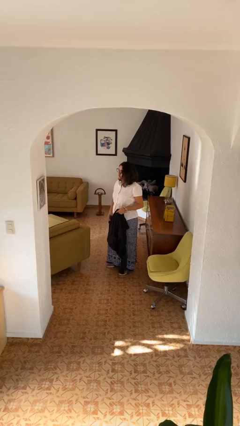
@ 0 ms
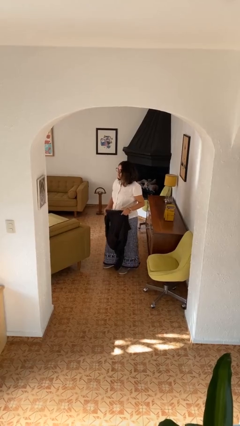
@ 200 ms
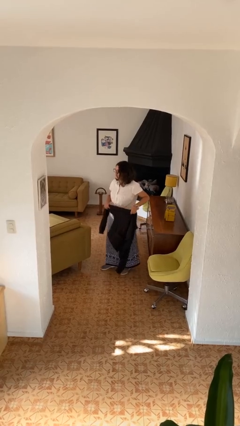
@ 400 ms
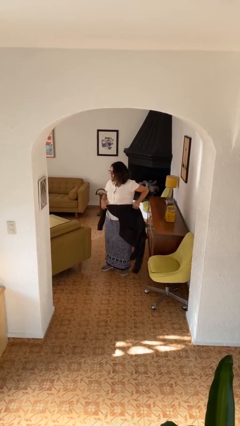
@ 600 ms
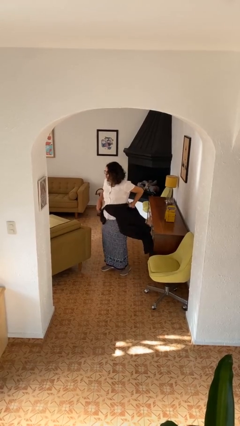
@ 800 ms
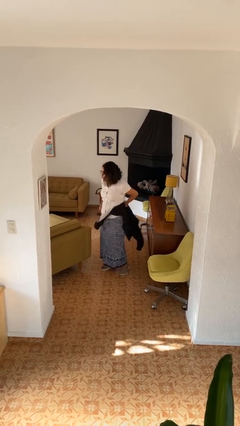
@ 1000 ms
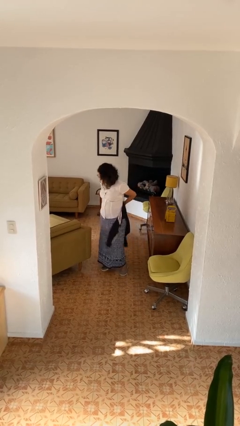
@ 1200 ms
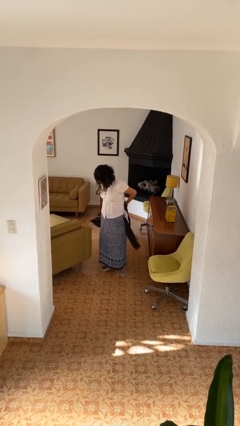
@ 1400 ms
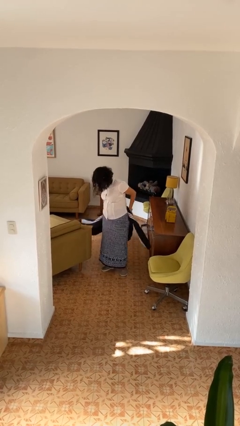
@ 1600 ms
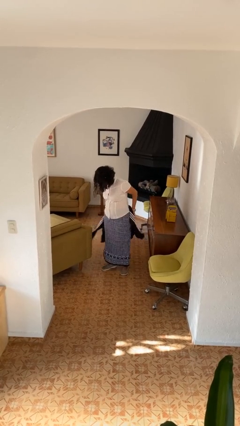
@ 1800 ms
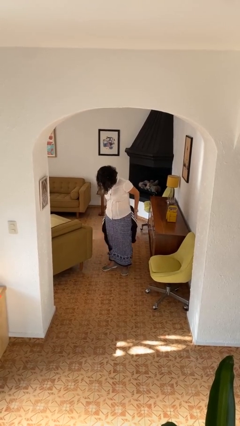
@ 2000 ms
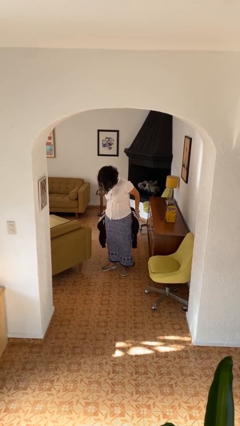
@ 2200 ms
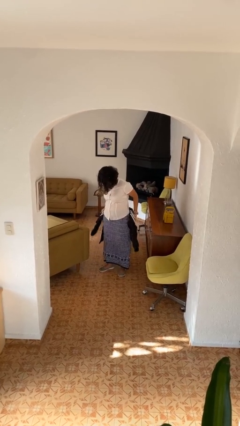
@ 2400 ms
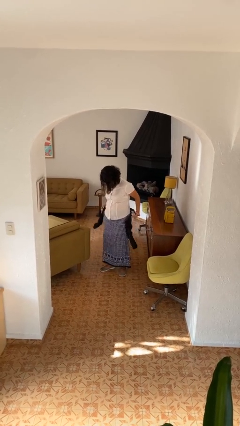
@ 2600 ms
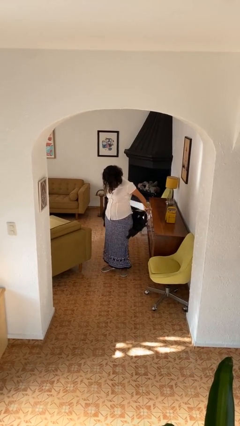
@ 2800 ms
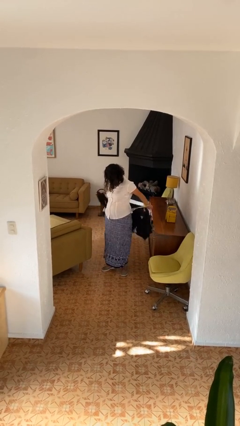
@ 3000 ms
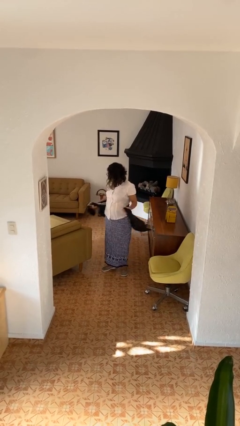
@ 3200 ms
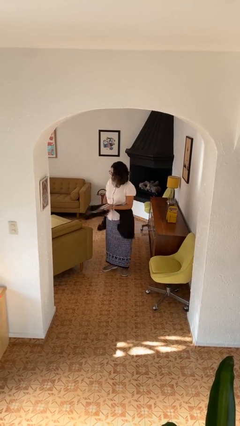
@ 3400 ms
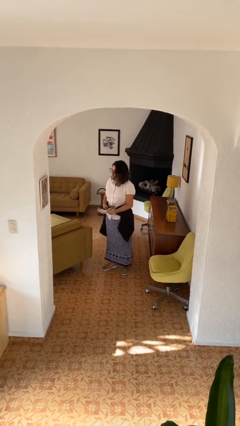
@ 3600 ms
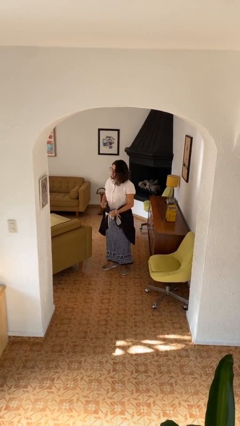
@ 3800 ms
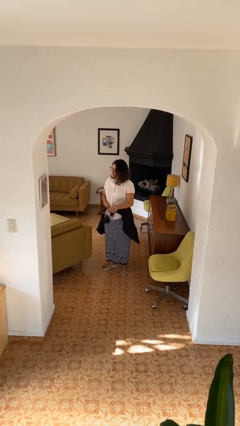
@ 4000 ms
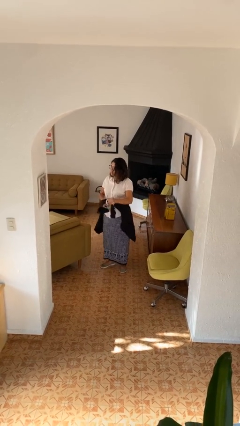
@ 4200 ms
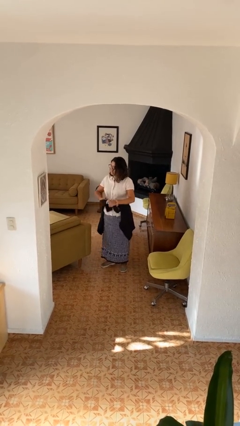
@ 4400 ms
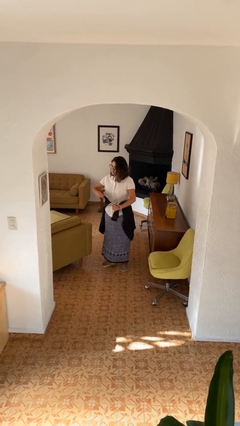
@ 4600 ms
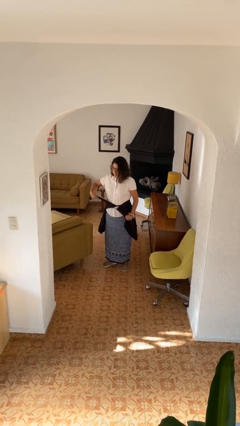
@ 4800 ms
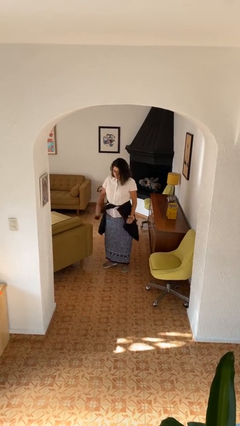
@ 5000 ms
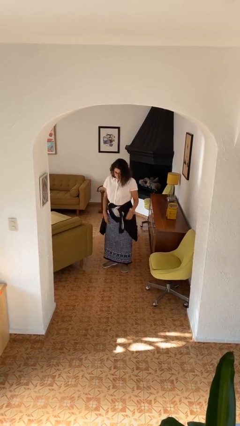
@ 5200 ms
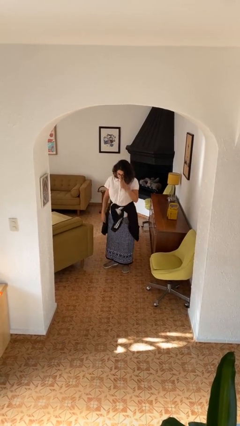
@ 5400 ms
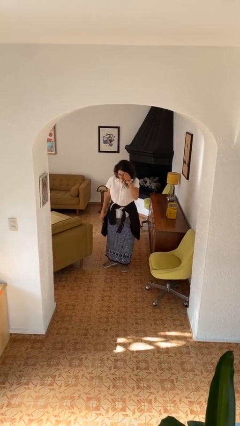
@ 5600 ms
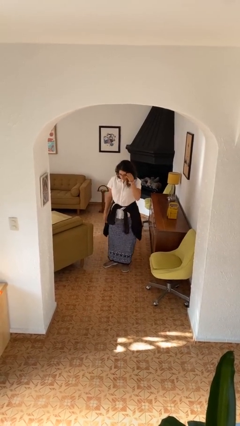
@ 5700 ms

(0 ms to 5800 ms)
person ties jacket around waist

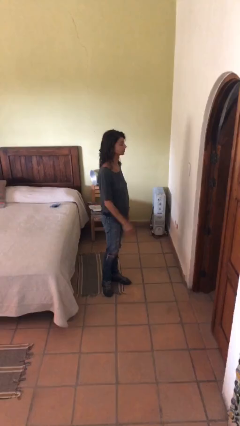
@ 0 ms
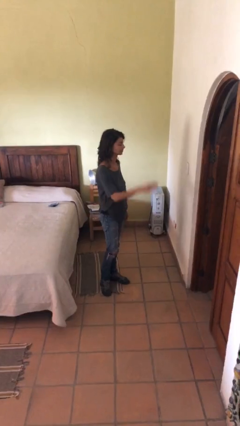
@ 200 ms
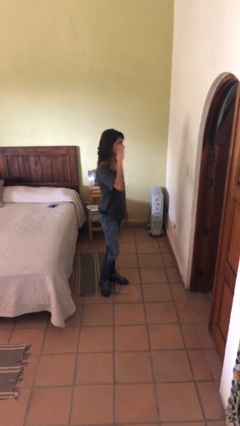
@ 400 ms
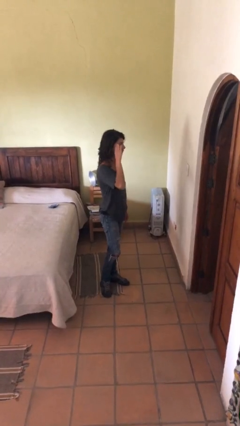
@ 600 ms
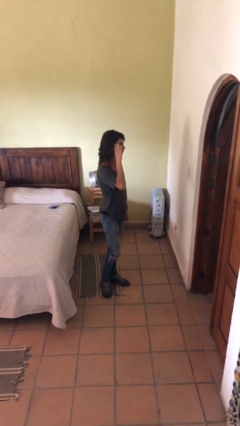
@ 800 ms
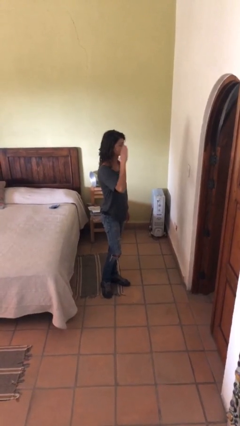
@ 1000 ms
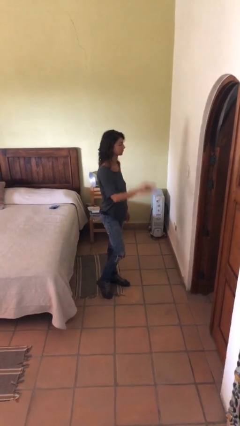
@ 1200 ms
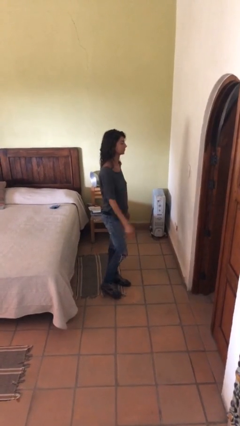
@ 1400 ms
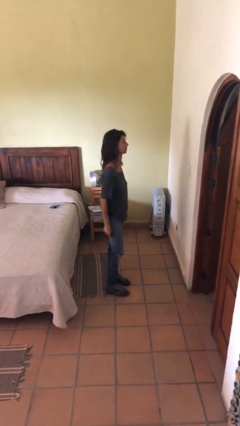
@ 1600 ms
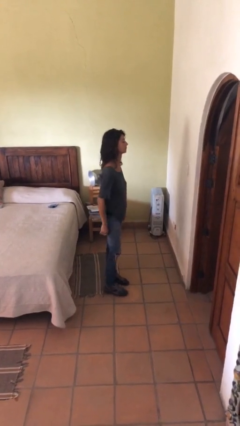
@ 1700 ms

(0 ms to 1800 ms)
person salutes

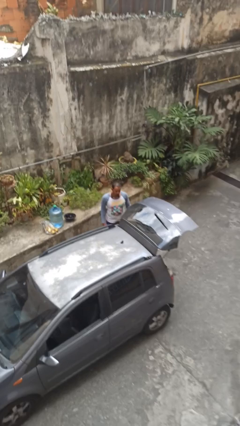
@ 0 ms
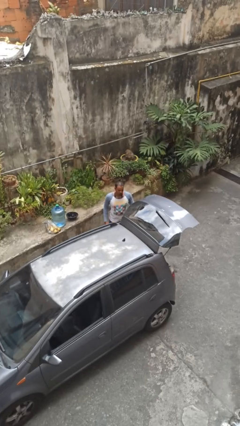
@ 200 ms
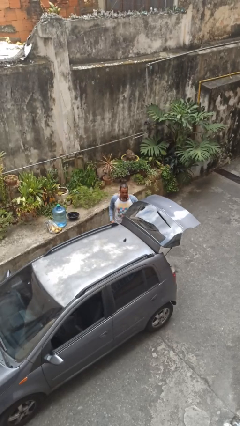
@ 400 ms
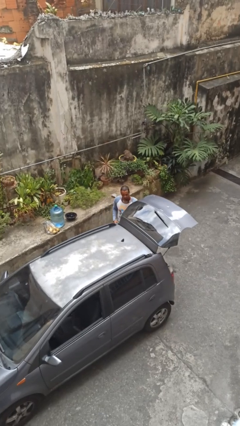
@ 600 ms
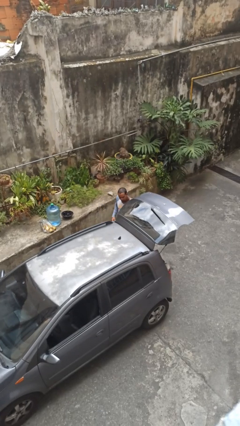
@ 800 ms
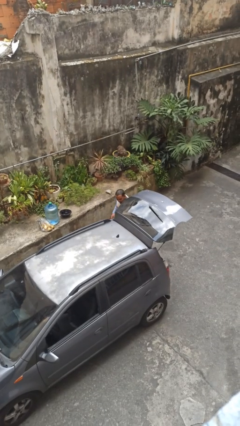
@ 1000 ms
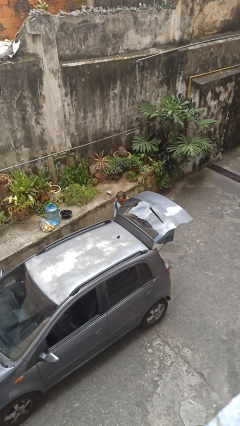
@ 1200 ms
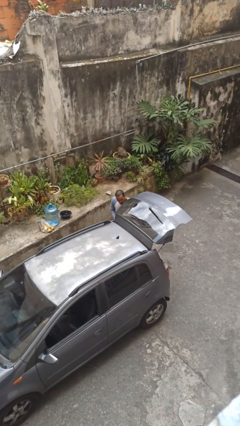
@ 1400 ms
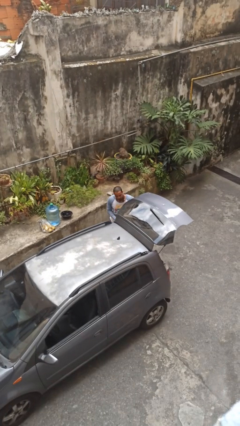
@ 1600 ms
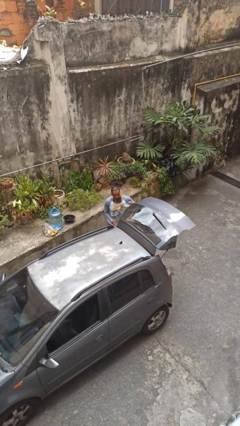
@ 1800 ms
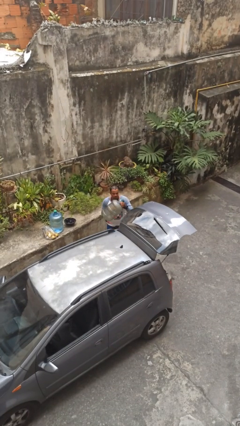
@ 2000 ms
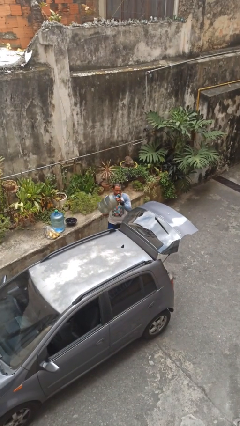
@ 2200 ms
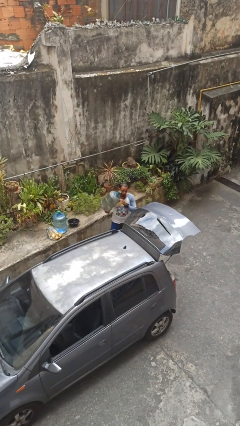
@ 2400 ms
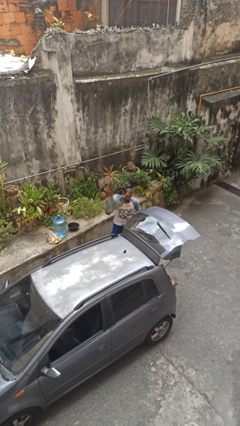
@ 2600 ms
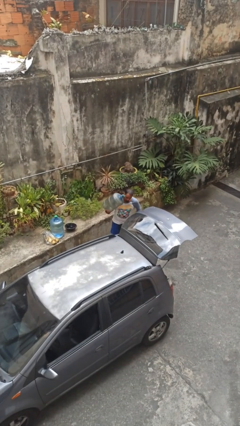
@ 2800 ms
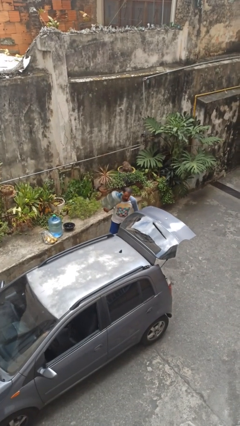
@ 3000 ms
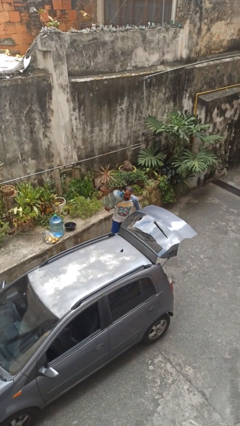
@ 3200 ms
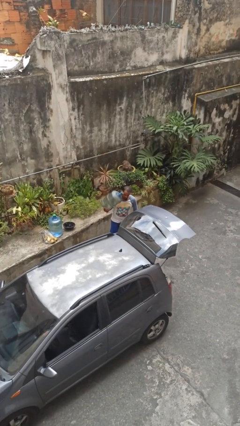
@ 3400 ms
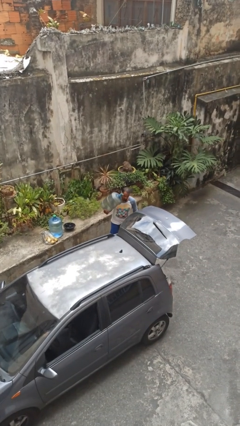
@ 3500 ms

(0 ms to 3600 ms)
person unloads car

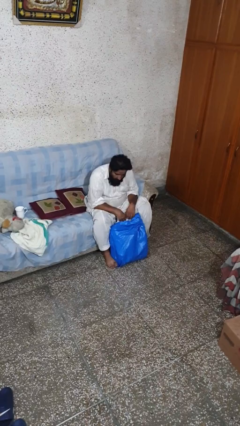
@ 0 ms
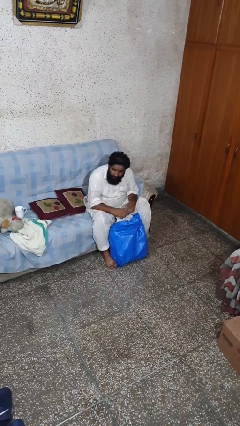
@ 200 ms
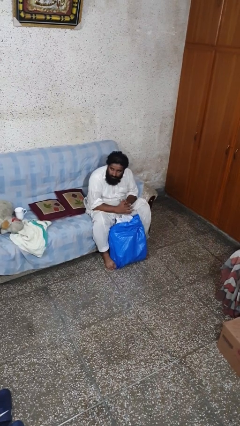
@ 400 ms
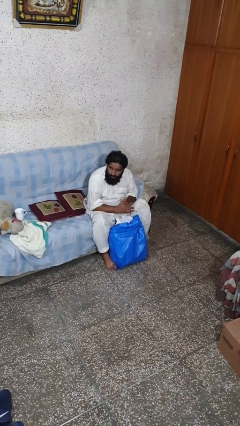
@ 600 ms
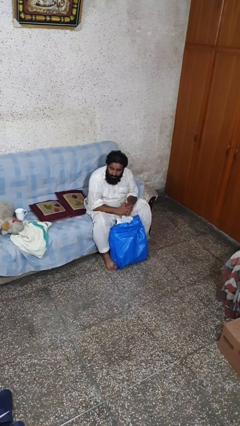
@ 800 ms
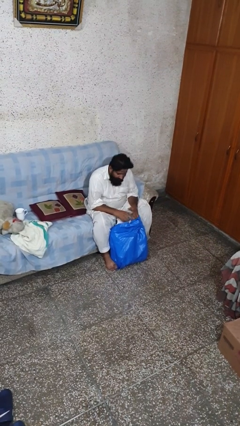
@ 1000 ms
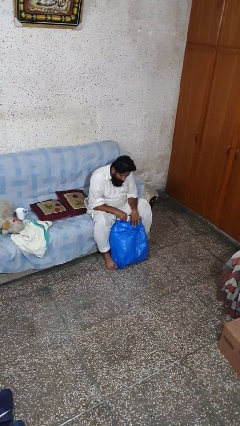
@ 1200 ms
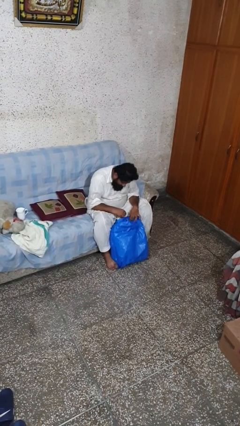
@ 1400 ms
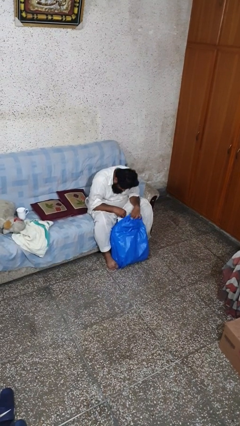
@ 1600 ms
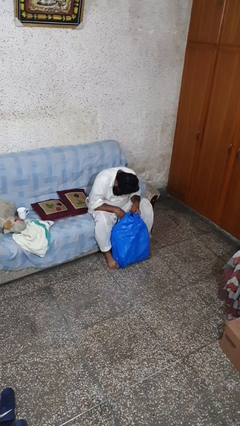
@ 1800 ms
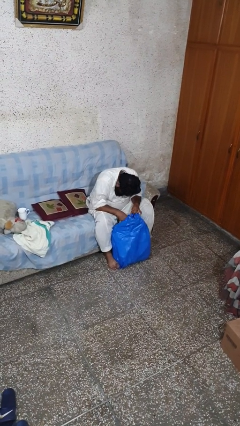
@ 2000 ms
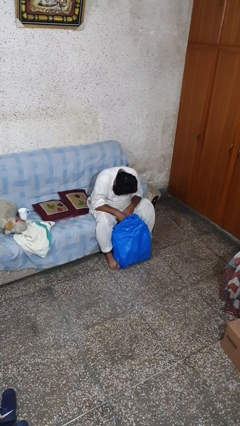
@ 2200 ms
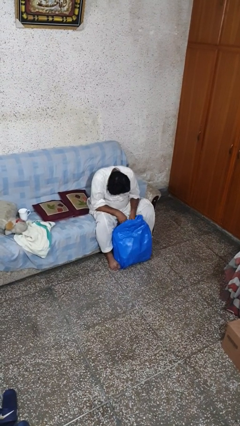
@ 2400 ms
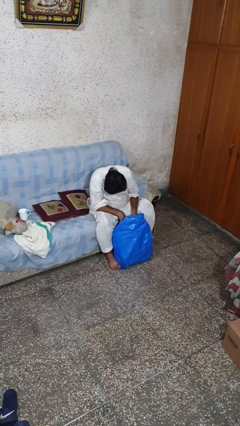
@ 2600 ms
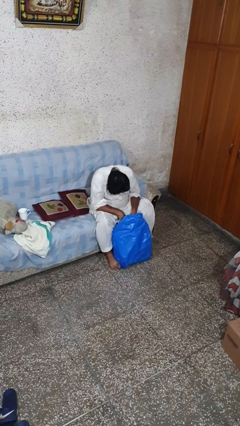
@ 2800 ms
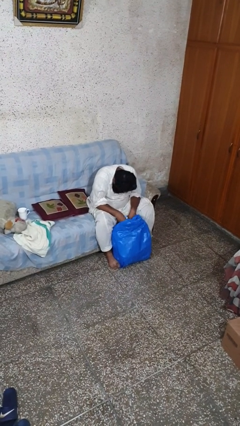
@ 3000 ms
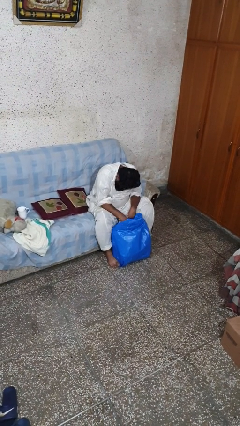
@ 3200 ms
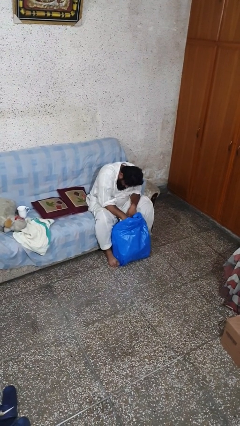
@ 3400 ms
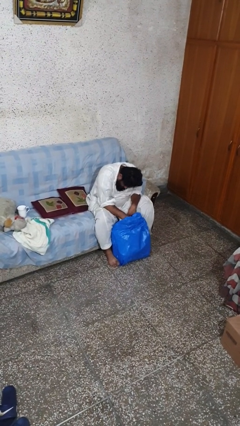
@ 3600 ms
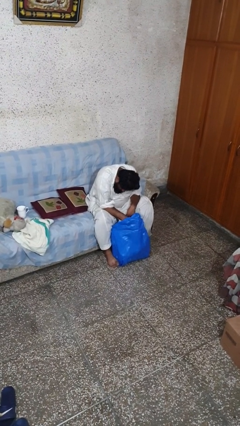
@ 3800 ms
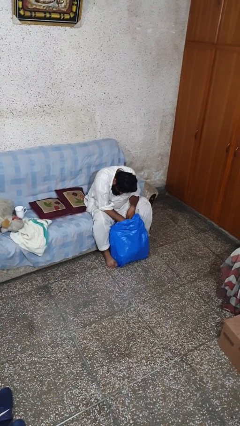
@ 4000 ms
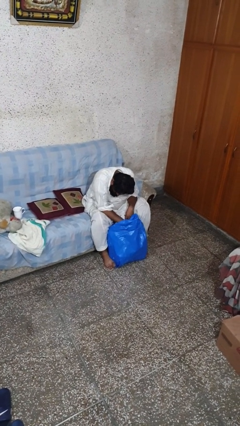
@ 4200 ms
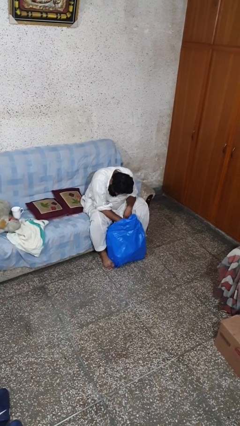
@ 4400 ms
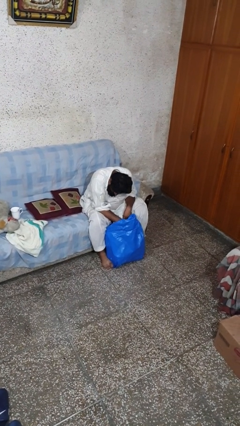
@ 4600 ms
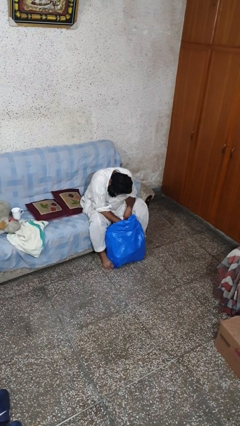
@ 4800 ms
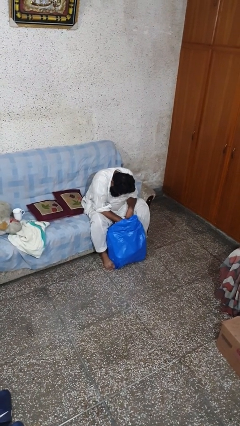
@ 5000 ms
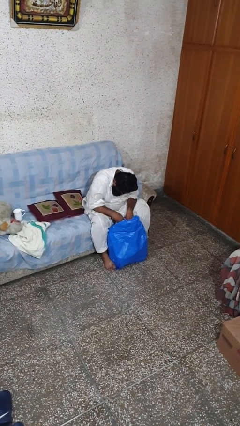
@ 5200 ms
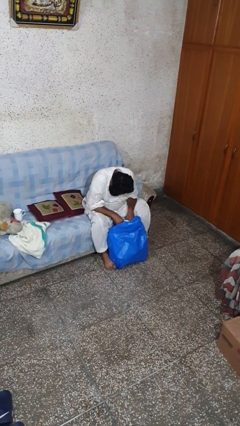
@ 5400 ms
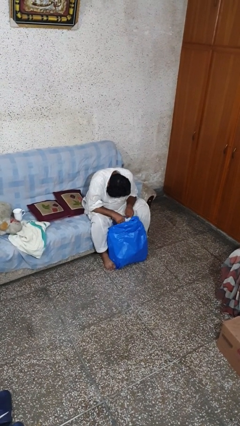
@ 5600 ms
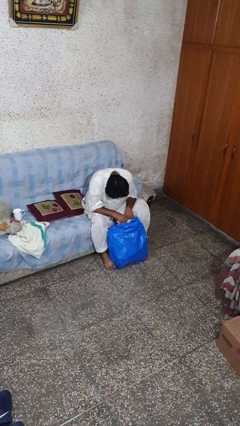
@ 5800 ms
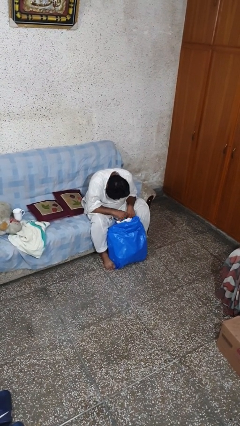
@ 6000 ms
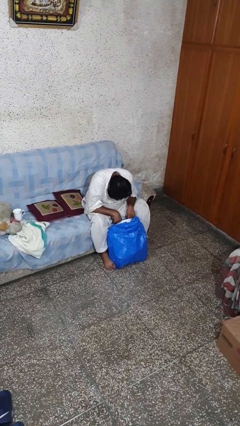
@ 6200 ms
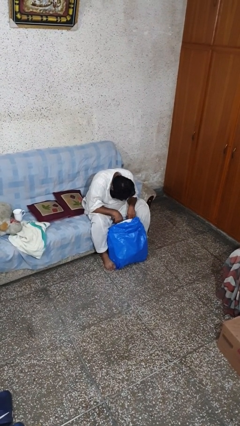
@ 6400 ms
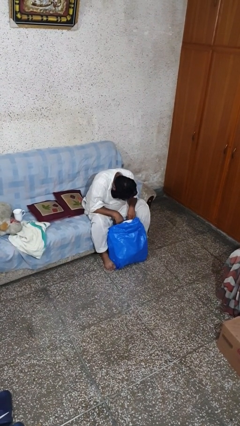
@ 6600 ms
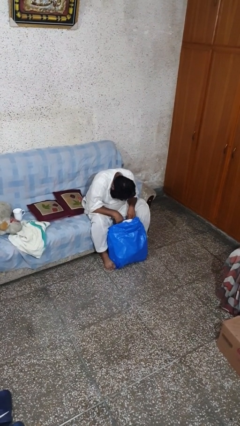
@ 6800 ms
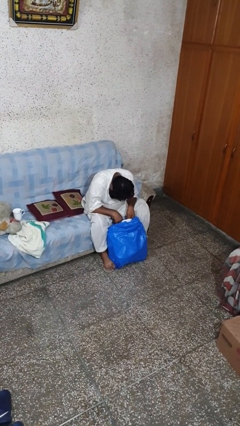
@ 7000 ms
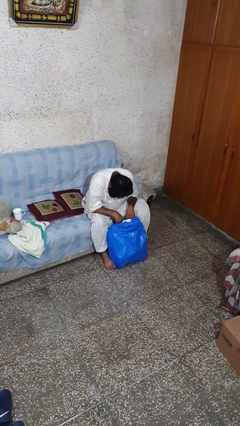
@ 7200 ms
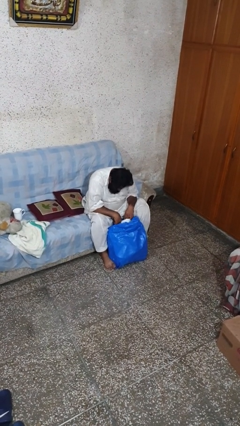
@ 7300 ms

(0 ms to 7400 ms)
person searches in bag
